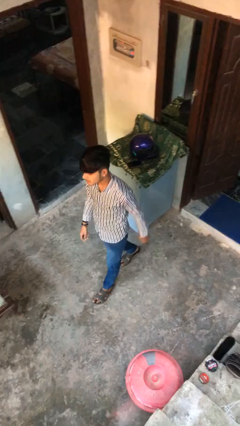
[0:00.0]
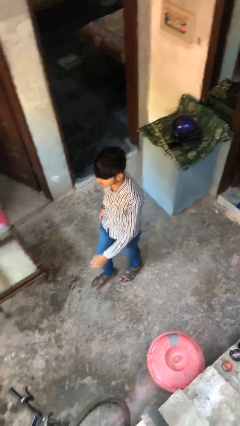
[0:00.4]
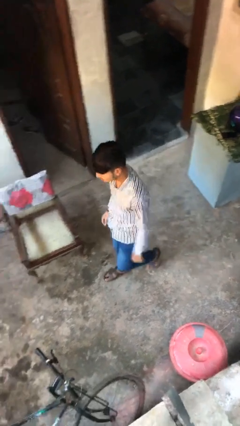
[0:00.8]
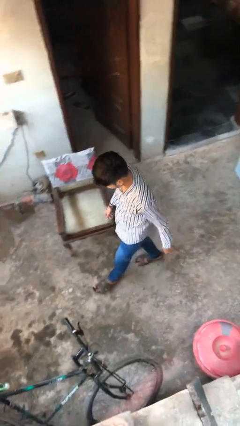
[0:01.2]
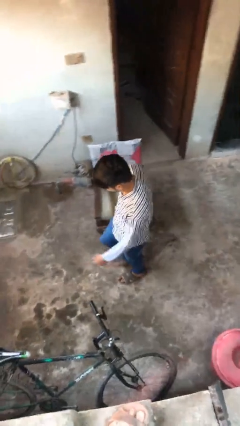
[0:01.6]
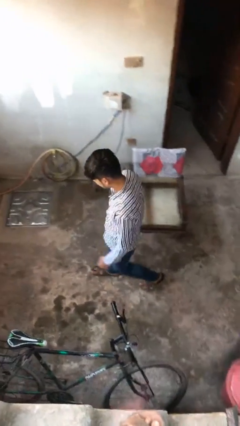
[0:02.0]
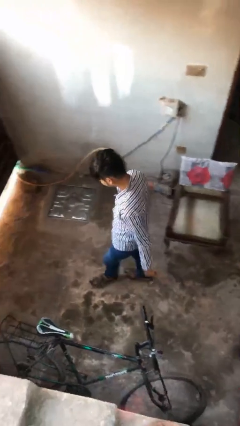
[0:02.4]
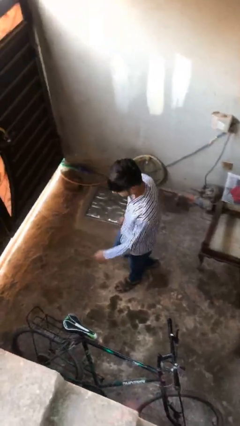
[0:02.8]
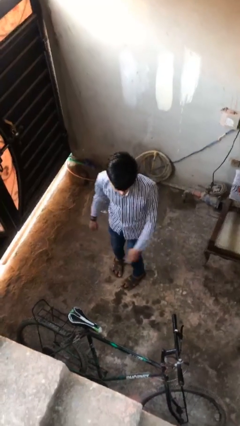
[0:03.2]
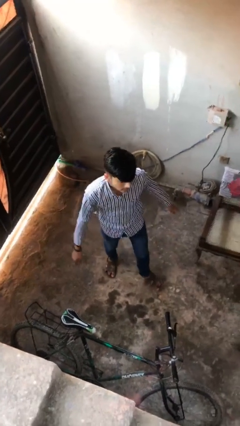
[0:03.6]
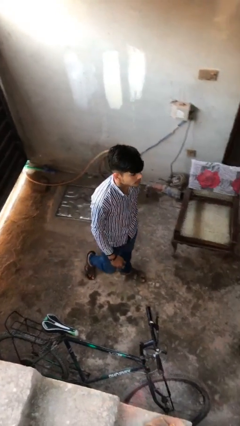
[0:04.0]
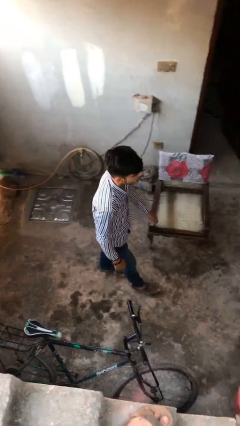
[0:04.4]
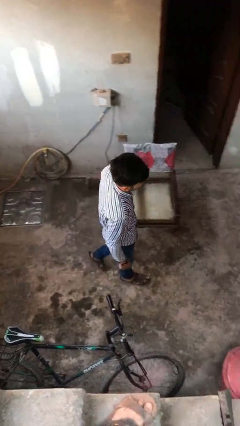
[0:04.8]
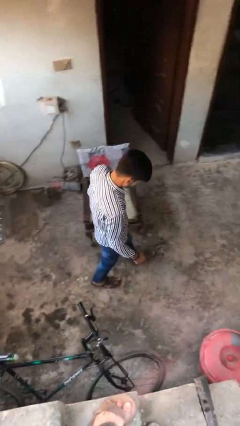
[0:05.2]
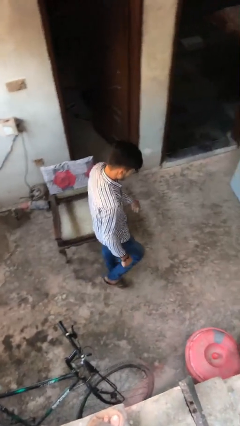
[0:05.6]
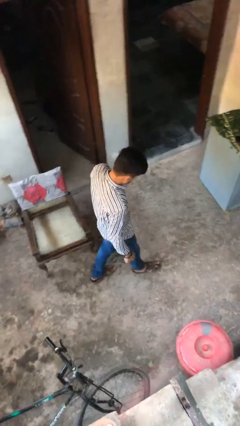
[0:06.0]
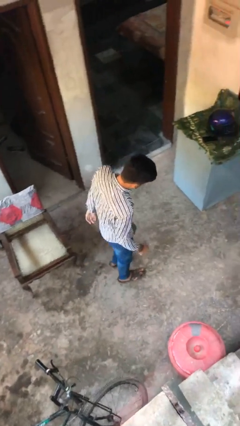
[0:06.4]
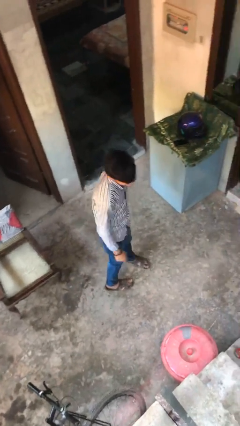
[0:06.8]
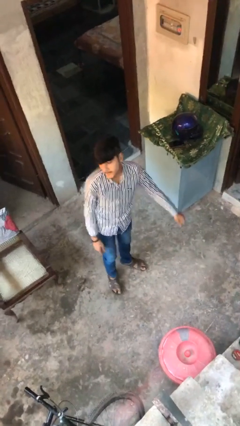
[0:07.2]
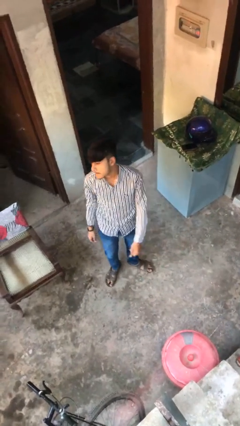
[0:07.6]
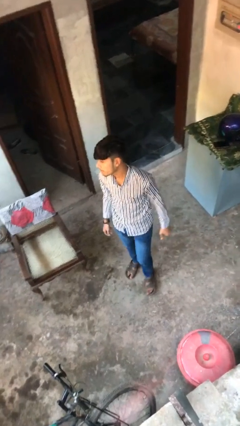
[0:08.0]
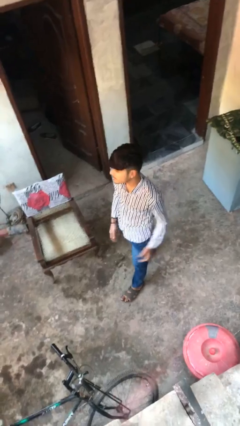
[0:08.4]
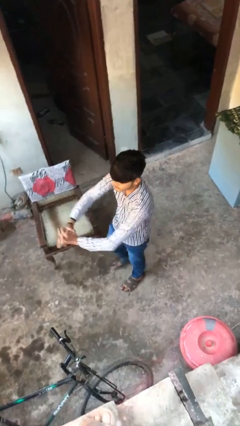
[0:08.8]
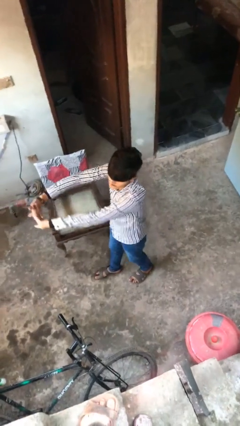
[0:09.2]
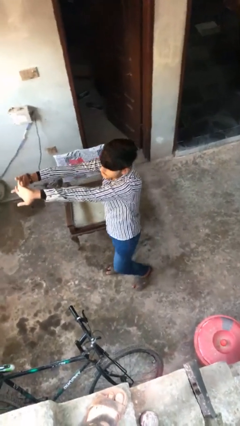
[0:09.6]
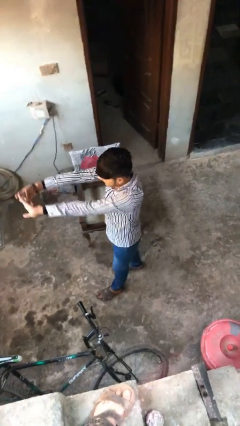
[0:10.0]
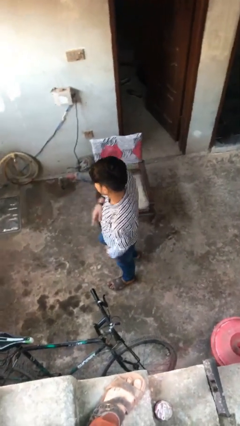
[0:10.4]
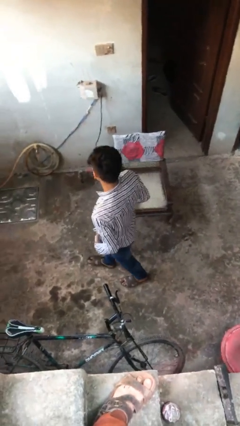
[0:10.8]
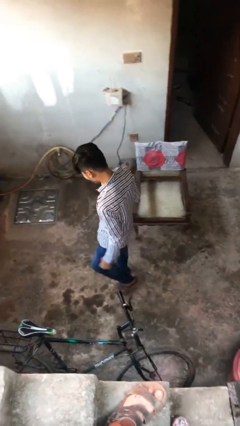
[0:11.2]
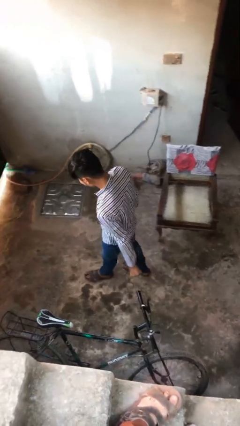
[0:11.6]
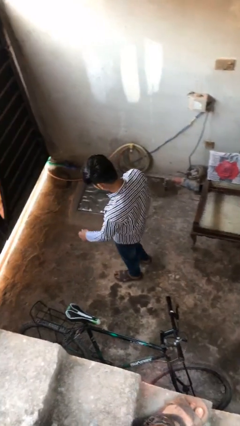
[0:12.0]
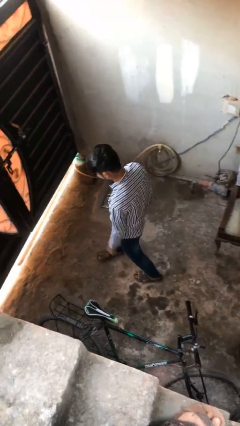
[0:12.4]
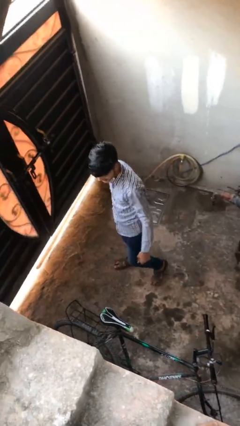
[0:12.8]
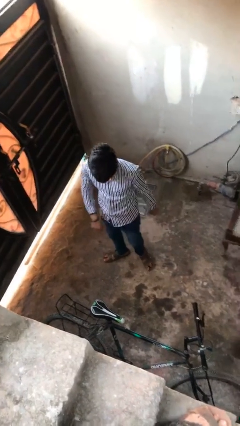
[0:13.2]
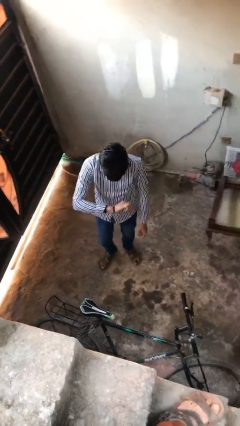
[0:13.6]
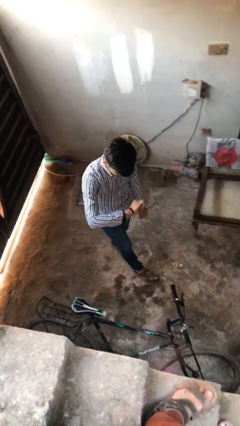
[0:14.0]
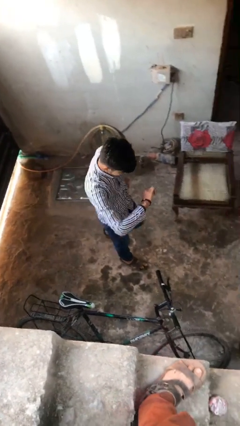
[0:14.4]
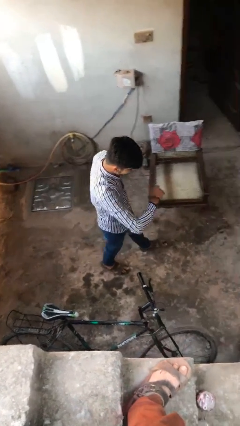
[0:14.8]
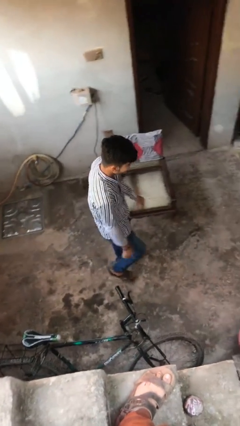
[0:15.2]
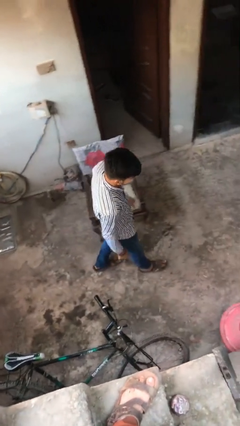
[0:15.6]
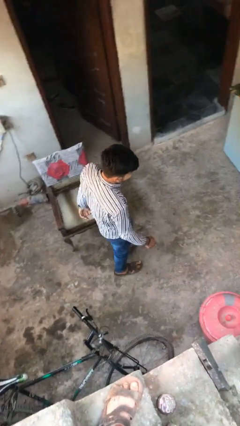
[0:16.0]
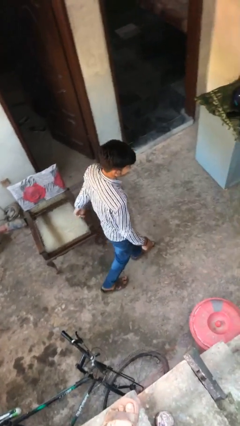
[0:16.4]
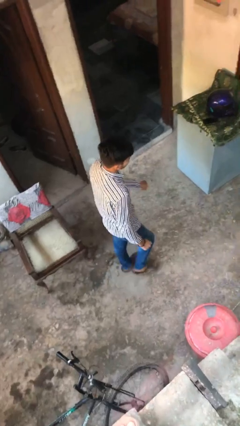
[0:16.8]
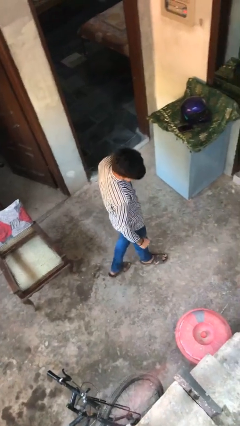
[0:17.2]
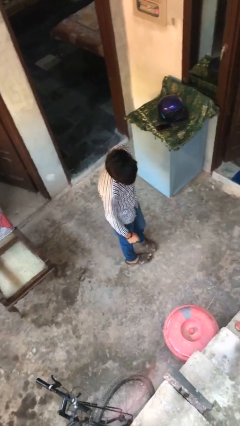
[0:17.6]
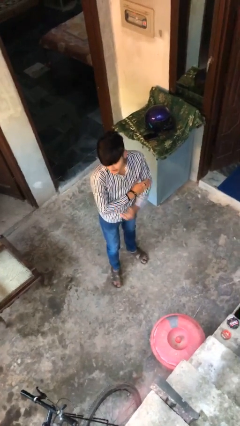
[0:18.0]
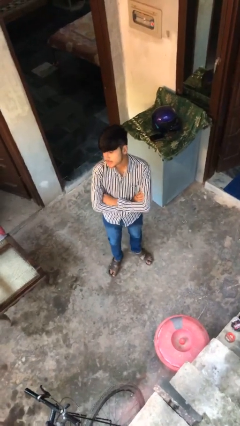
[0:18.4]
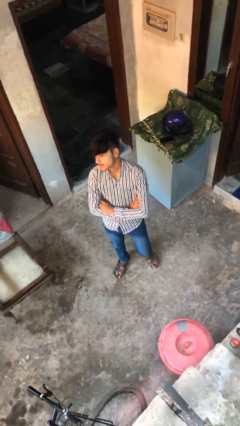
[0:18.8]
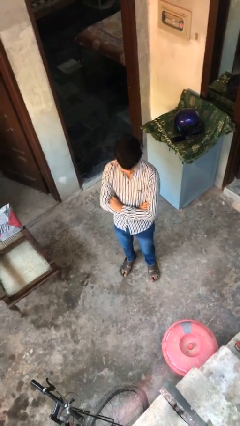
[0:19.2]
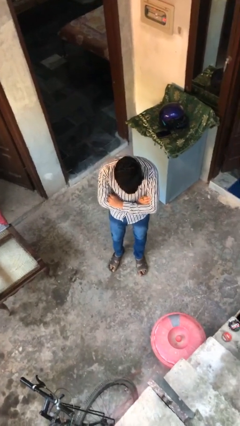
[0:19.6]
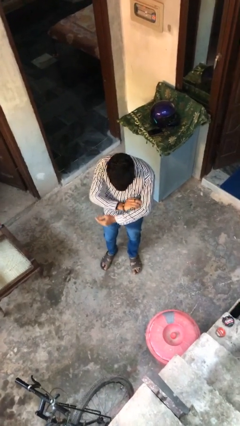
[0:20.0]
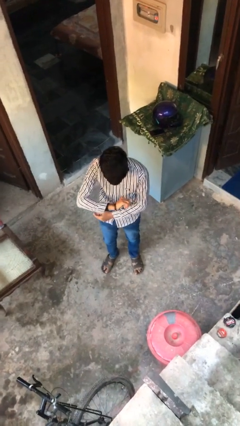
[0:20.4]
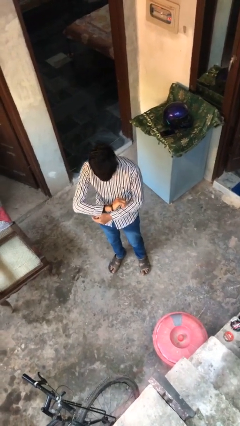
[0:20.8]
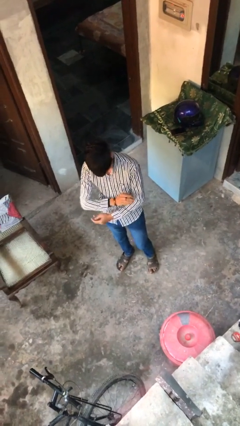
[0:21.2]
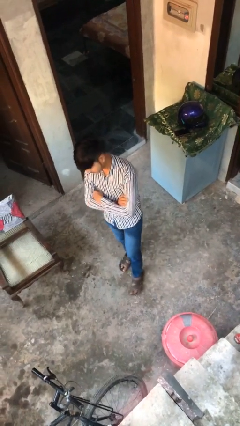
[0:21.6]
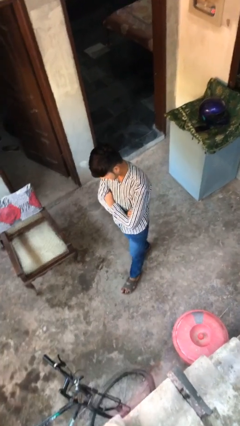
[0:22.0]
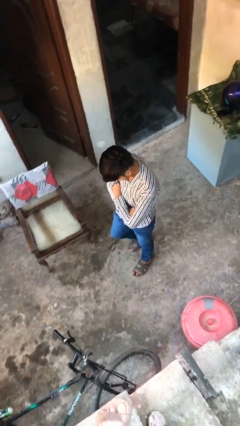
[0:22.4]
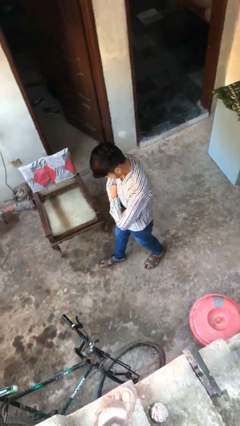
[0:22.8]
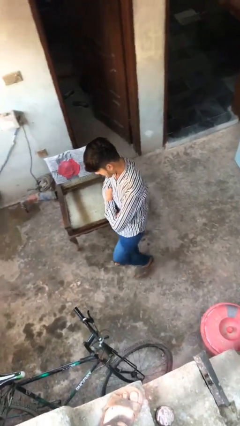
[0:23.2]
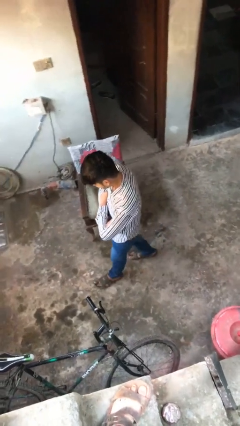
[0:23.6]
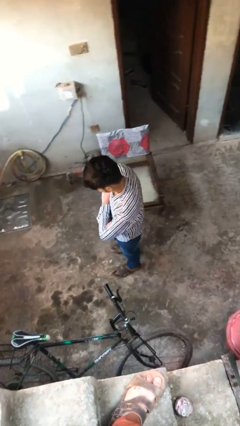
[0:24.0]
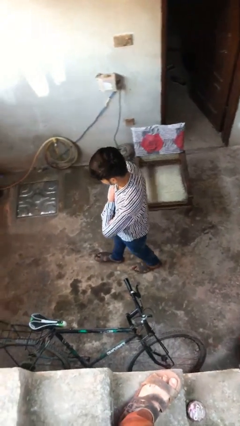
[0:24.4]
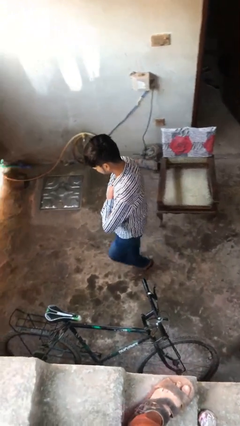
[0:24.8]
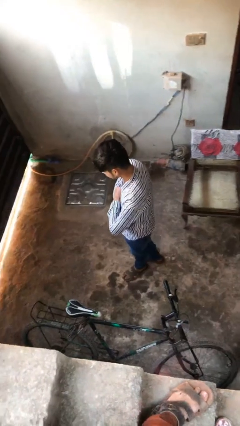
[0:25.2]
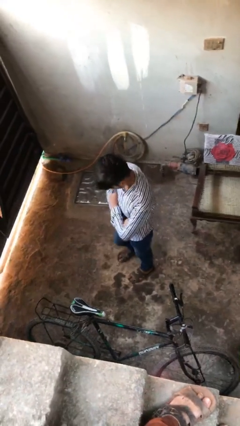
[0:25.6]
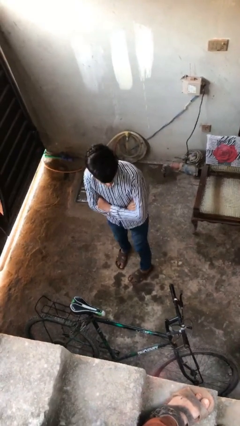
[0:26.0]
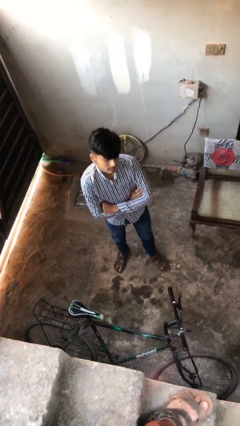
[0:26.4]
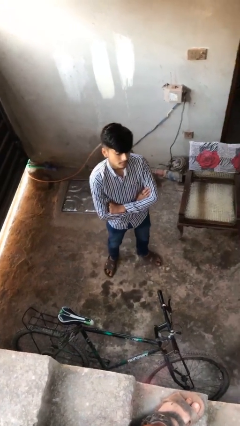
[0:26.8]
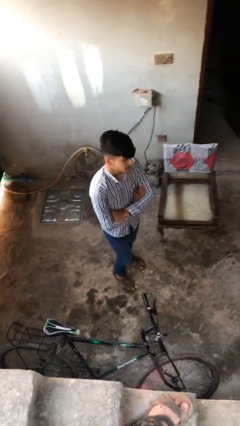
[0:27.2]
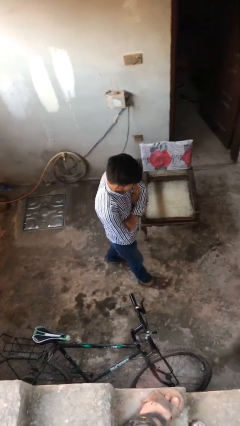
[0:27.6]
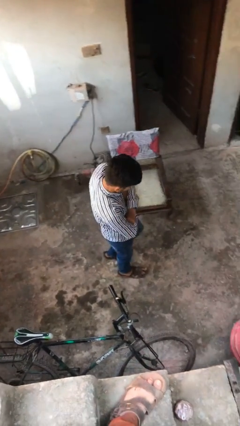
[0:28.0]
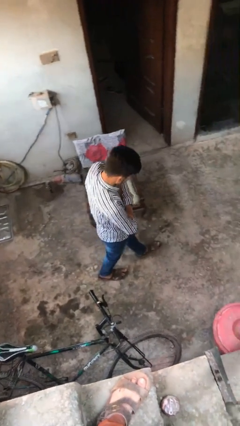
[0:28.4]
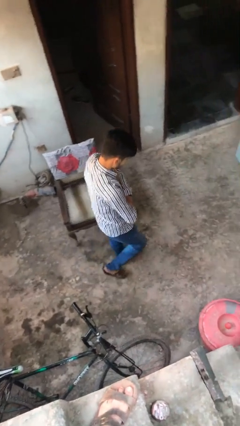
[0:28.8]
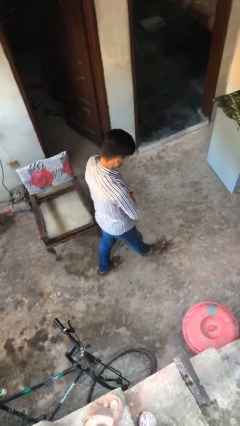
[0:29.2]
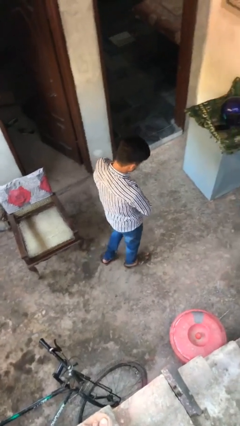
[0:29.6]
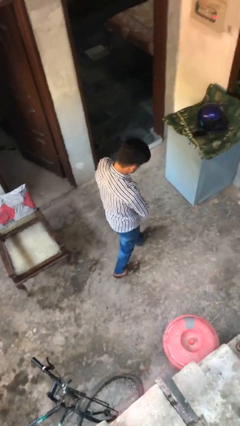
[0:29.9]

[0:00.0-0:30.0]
person walks

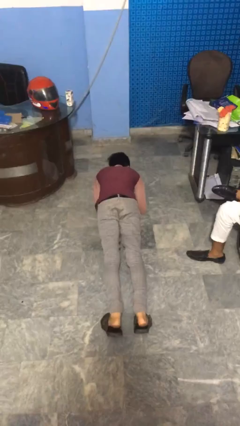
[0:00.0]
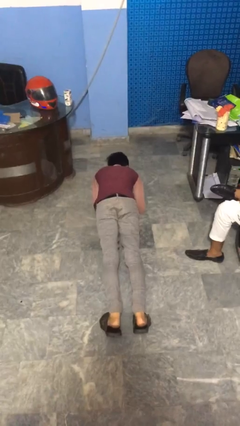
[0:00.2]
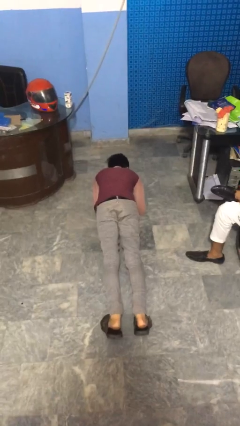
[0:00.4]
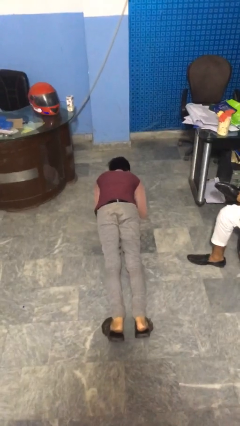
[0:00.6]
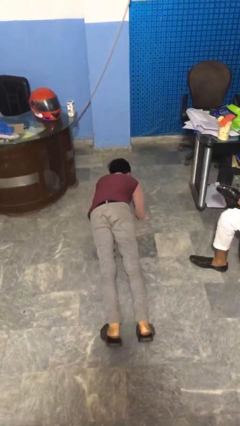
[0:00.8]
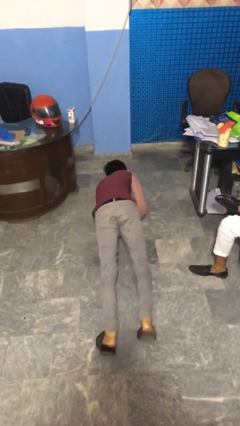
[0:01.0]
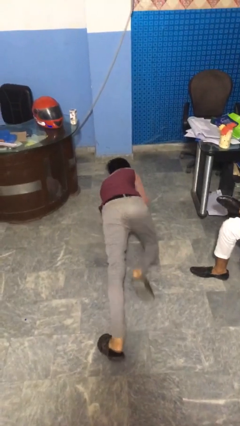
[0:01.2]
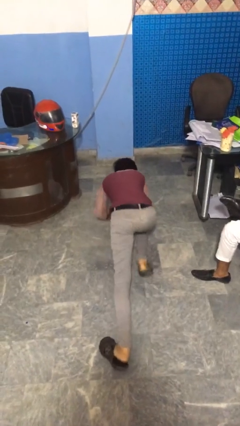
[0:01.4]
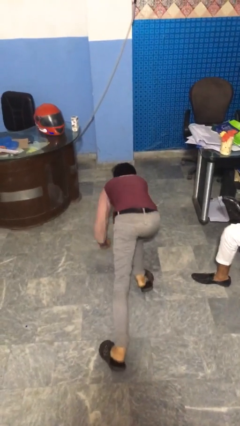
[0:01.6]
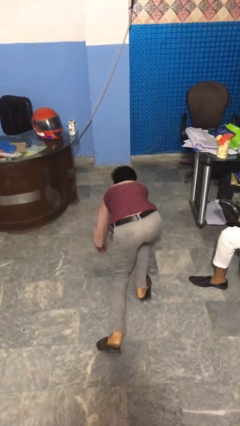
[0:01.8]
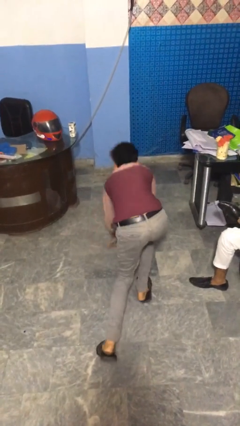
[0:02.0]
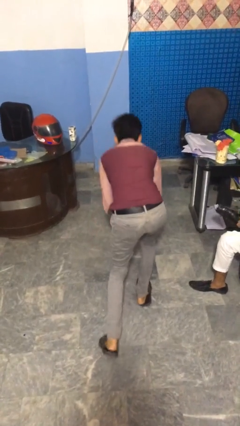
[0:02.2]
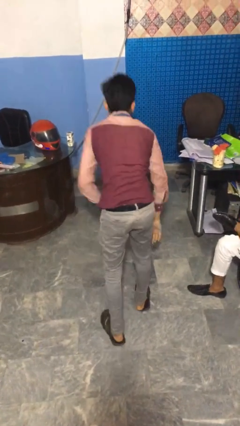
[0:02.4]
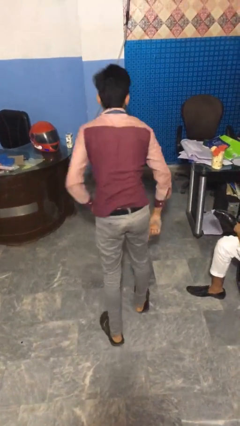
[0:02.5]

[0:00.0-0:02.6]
person stands up from floor

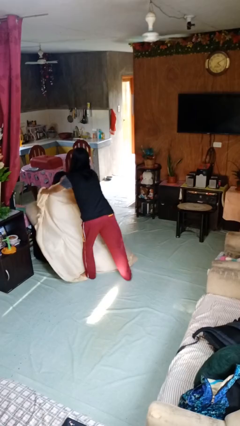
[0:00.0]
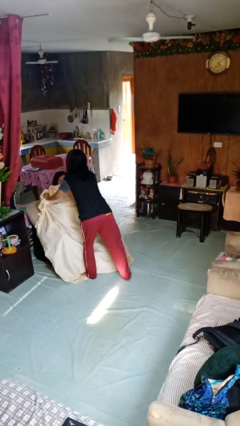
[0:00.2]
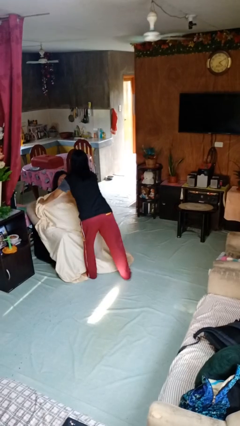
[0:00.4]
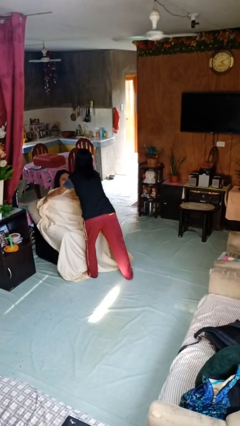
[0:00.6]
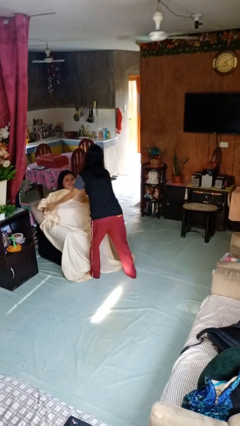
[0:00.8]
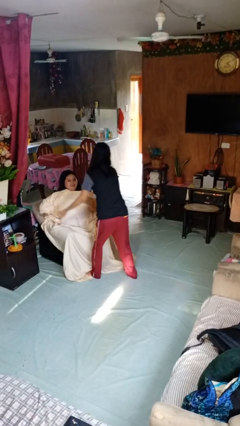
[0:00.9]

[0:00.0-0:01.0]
person covers friend with blanket
